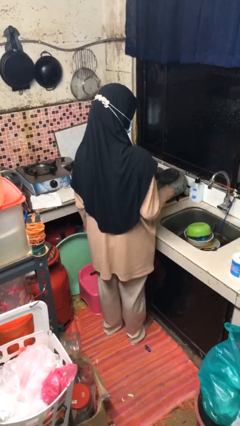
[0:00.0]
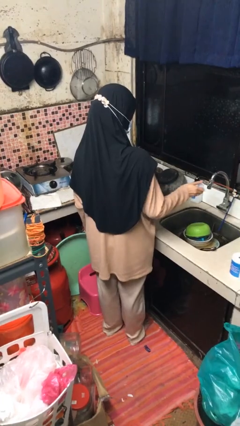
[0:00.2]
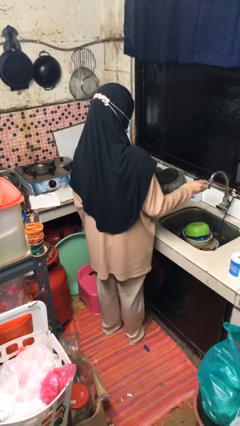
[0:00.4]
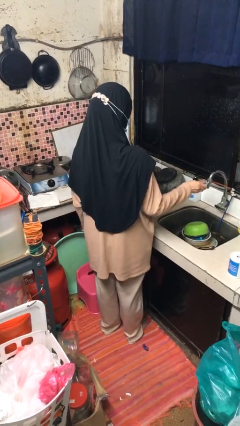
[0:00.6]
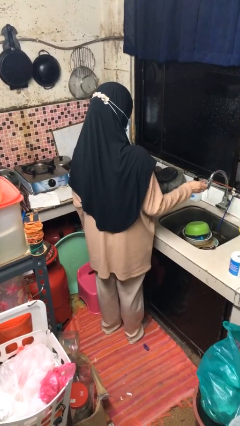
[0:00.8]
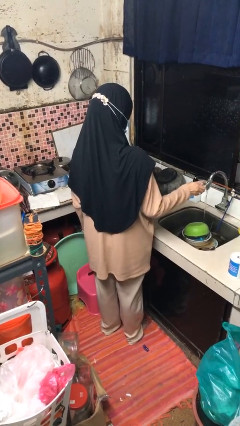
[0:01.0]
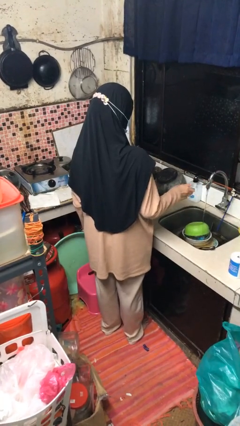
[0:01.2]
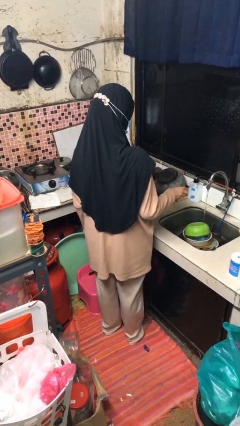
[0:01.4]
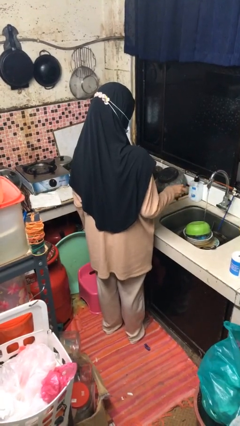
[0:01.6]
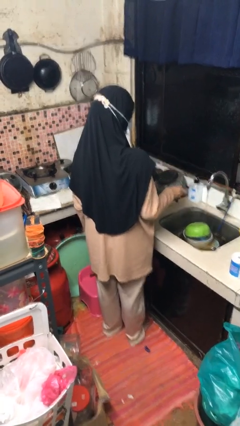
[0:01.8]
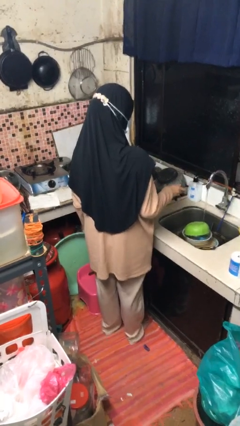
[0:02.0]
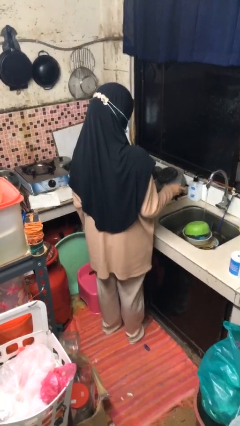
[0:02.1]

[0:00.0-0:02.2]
person turns on faucet

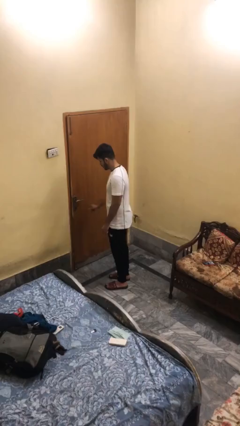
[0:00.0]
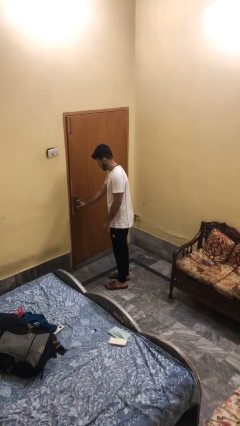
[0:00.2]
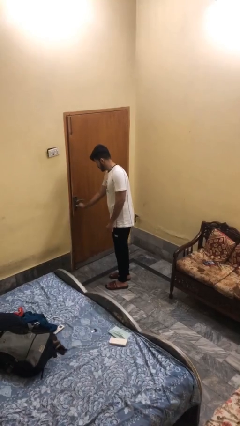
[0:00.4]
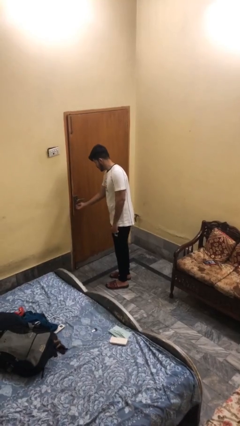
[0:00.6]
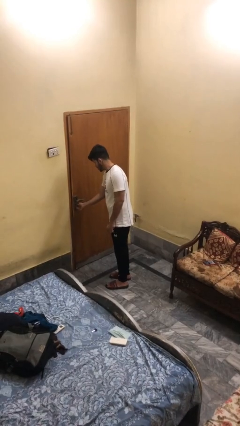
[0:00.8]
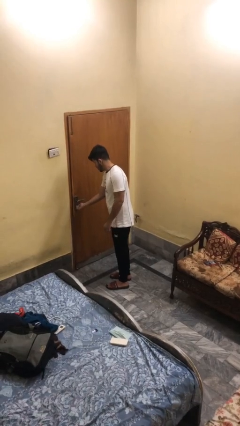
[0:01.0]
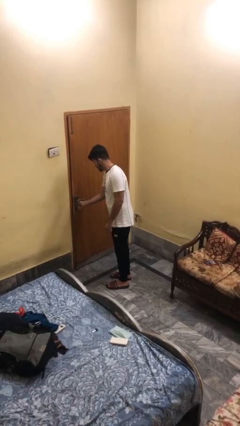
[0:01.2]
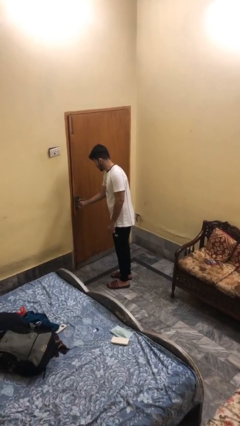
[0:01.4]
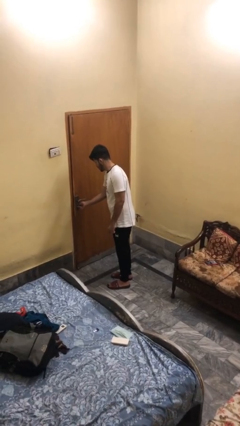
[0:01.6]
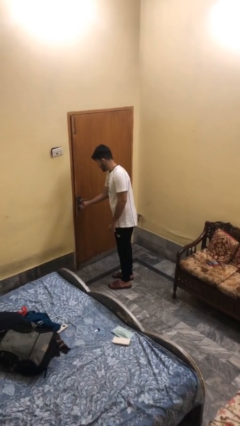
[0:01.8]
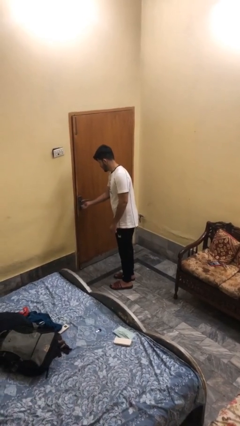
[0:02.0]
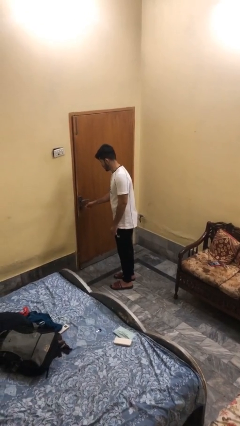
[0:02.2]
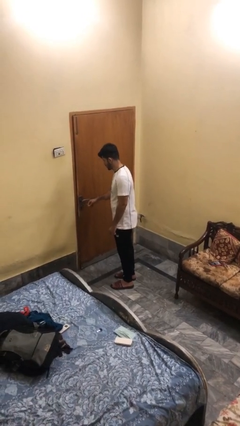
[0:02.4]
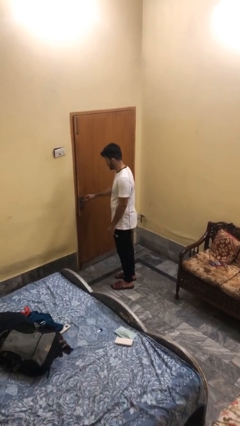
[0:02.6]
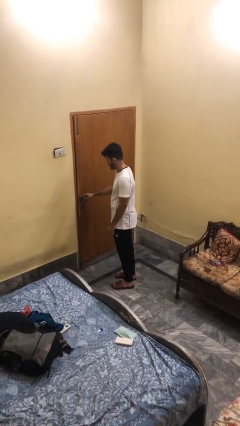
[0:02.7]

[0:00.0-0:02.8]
person unlocks door with keys

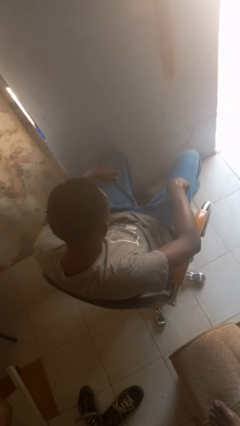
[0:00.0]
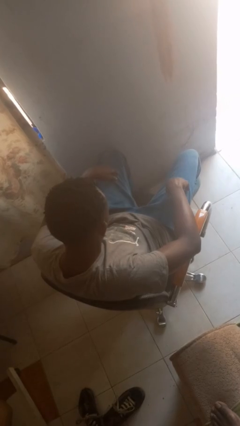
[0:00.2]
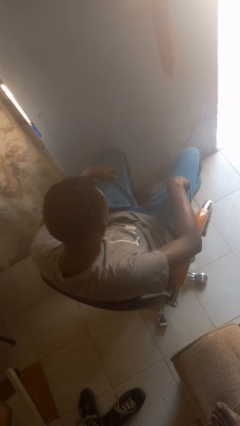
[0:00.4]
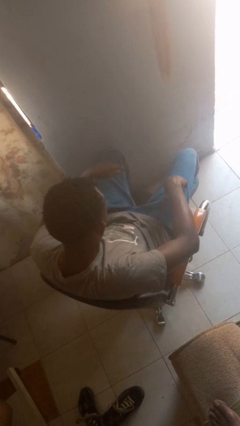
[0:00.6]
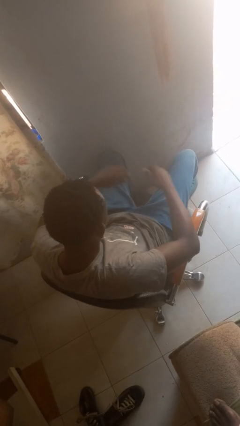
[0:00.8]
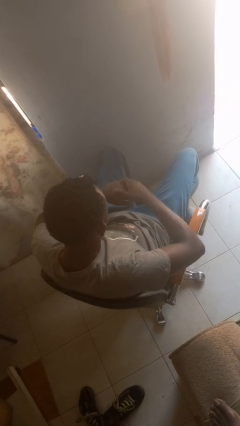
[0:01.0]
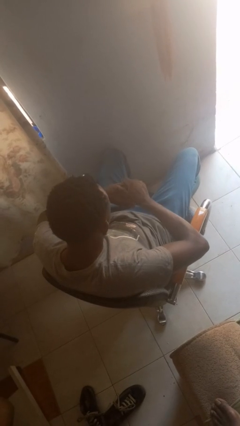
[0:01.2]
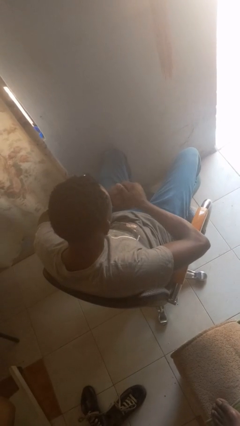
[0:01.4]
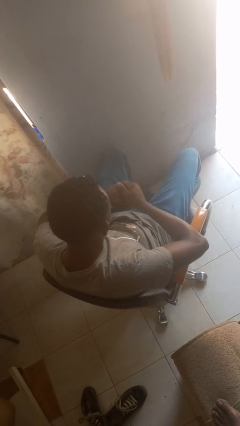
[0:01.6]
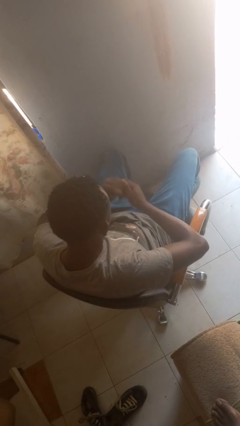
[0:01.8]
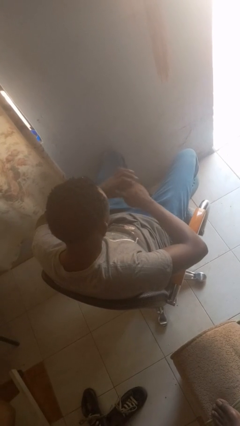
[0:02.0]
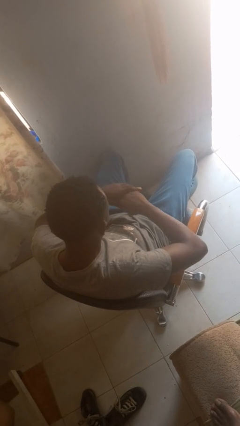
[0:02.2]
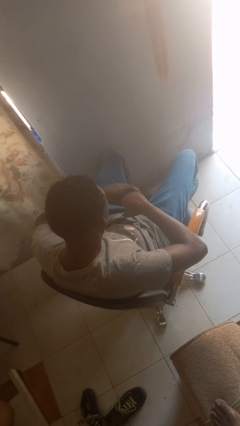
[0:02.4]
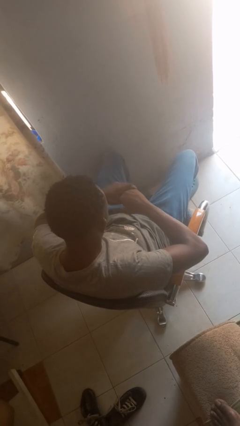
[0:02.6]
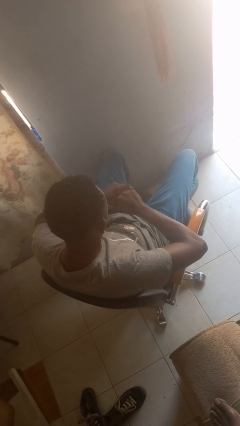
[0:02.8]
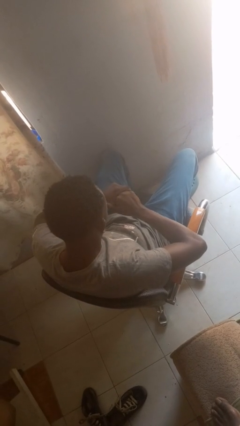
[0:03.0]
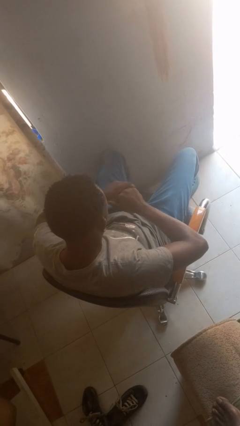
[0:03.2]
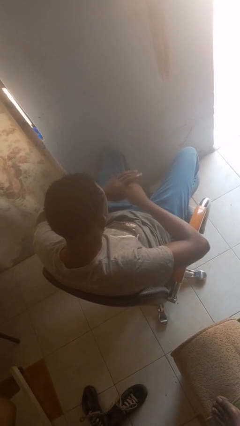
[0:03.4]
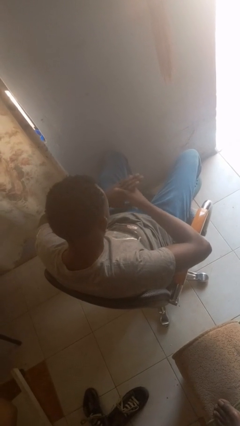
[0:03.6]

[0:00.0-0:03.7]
person looks at hands in lap

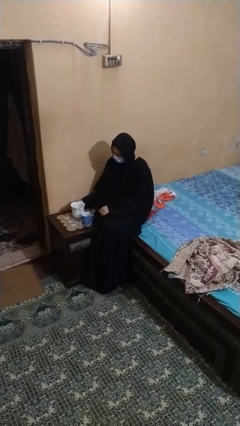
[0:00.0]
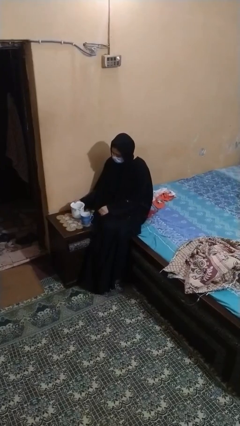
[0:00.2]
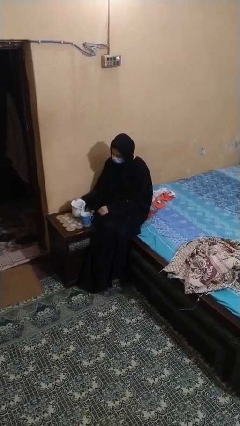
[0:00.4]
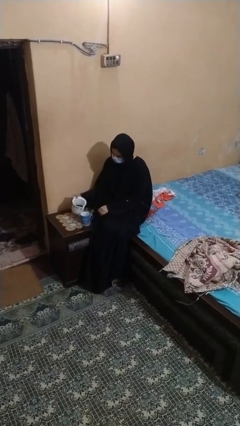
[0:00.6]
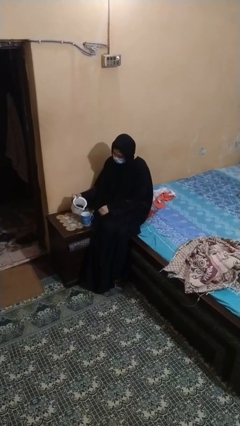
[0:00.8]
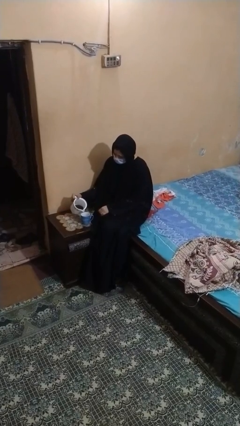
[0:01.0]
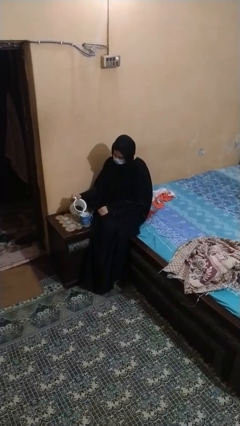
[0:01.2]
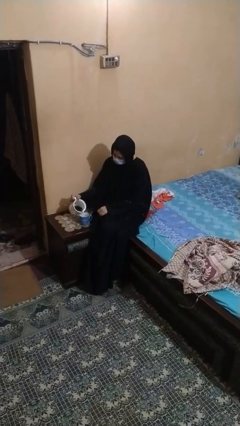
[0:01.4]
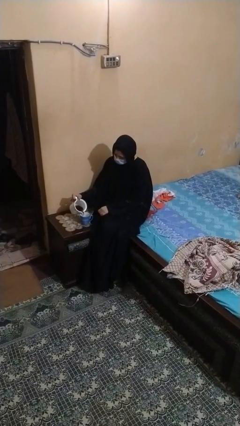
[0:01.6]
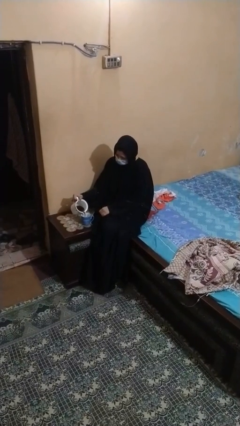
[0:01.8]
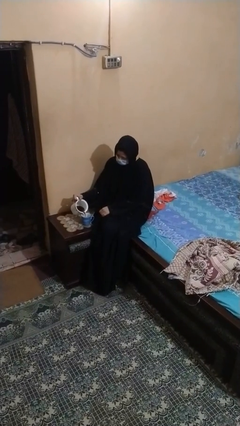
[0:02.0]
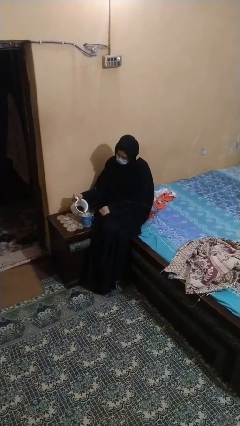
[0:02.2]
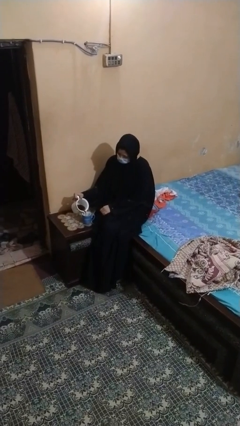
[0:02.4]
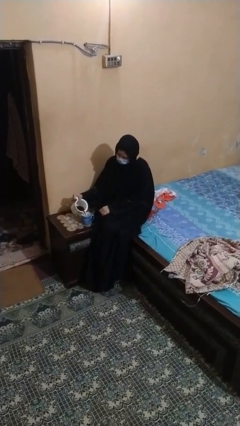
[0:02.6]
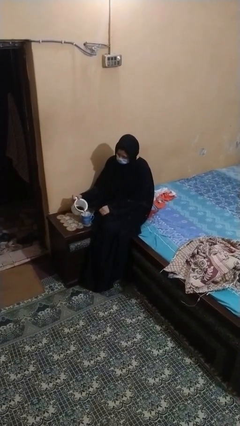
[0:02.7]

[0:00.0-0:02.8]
person pours coffee into mug

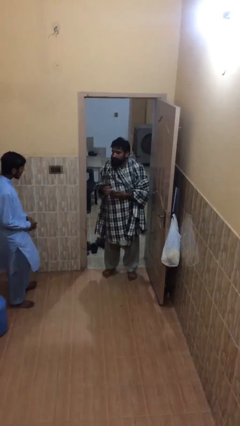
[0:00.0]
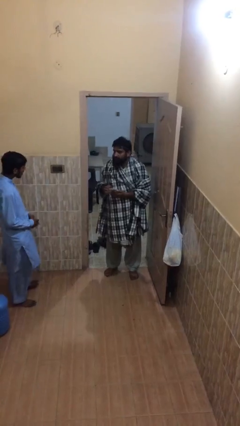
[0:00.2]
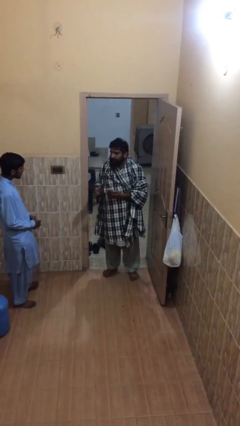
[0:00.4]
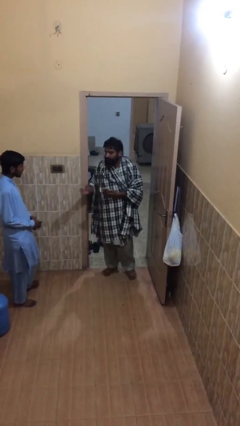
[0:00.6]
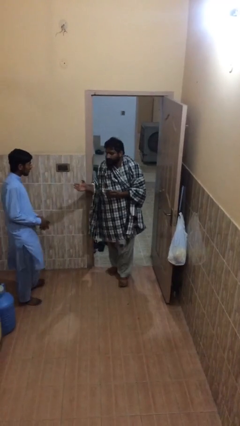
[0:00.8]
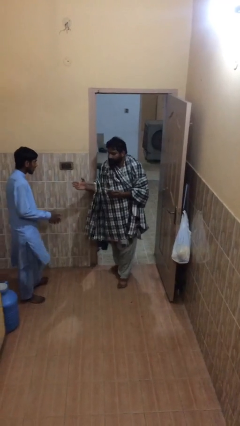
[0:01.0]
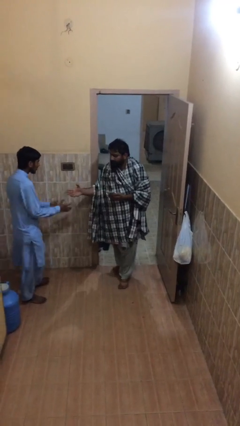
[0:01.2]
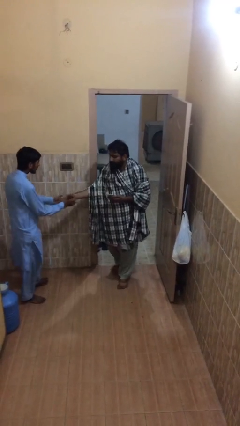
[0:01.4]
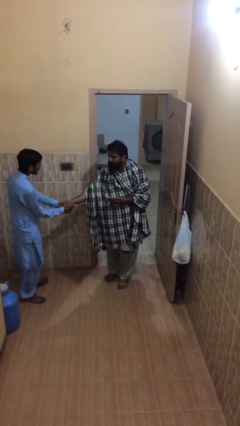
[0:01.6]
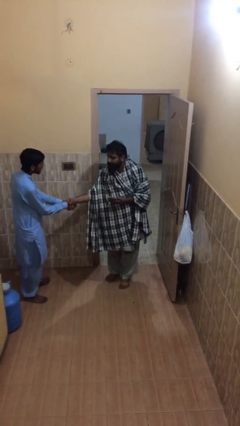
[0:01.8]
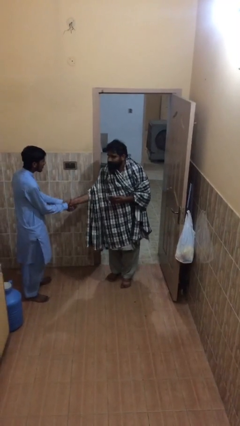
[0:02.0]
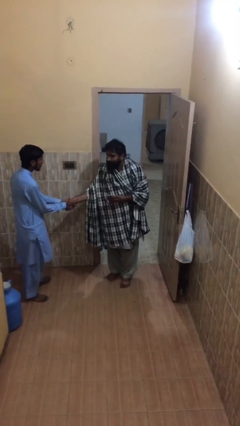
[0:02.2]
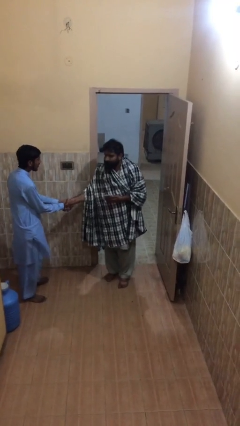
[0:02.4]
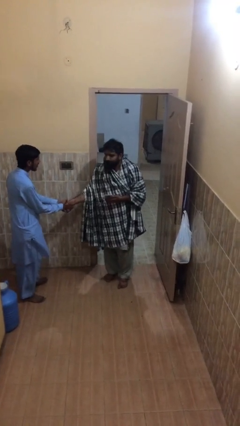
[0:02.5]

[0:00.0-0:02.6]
person shakes hand

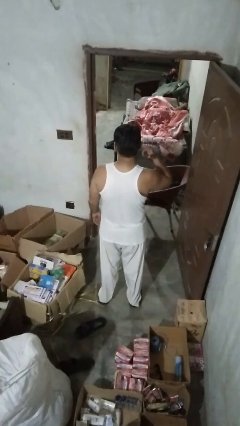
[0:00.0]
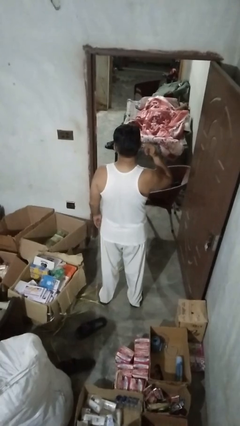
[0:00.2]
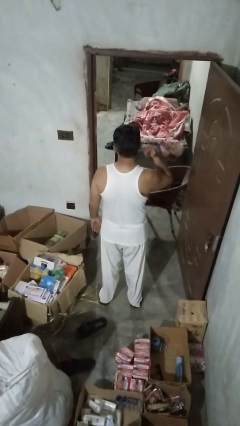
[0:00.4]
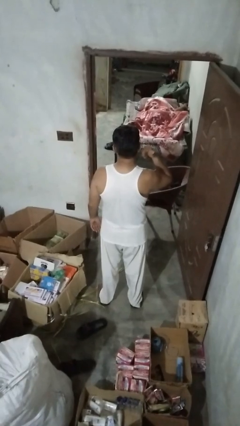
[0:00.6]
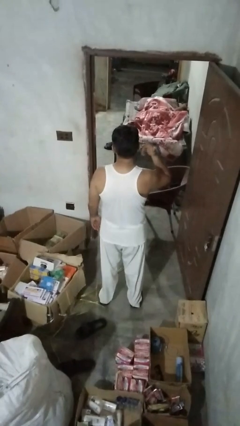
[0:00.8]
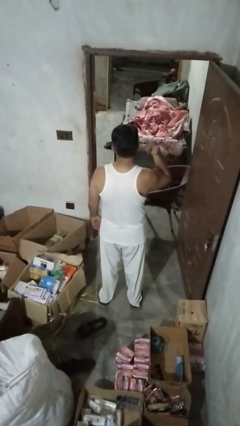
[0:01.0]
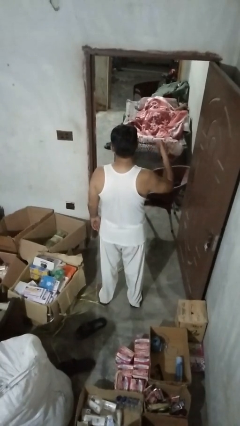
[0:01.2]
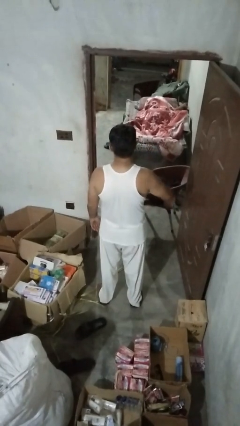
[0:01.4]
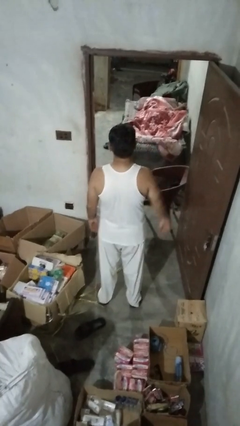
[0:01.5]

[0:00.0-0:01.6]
person touches earlobe

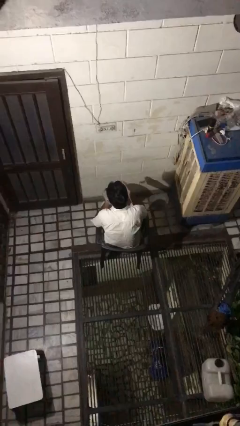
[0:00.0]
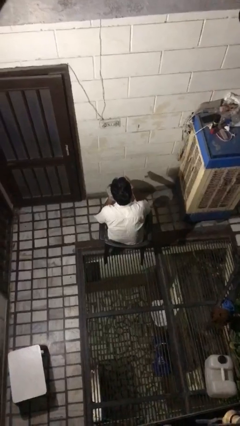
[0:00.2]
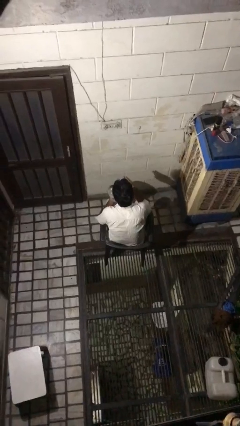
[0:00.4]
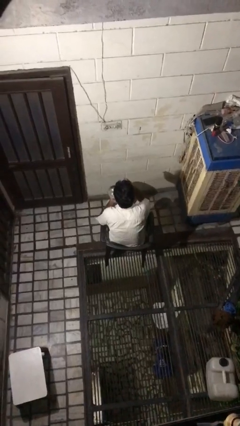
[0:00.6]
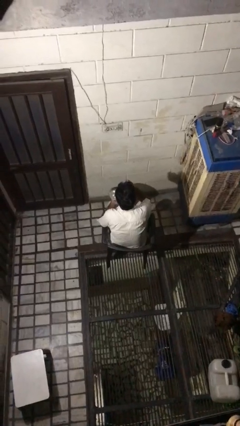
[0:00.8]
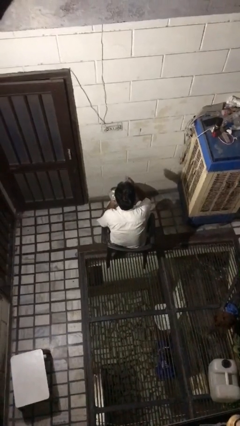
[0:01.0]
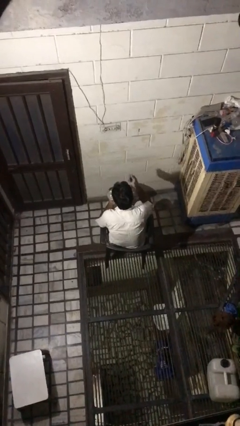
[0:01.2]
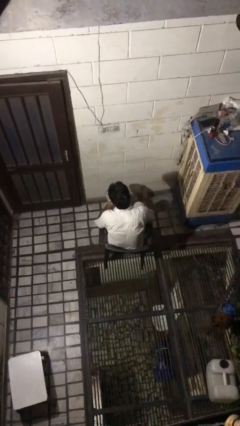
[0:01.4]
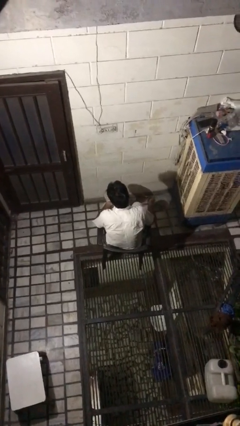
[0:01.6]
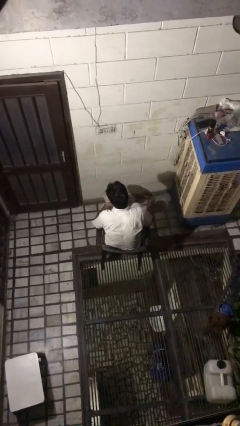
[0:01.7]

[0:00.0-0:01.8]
person eats with utensil
